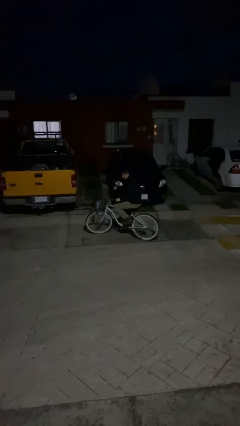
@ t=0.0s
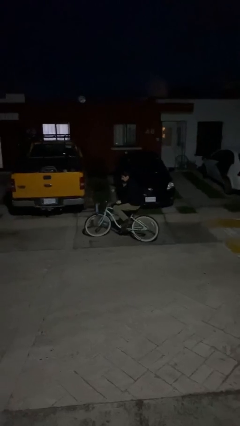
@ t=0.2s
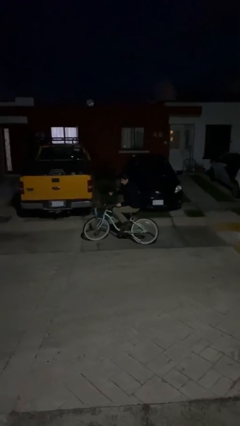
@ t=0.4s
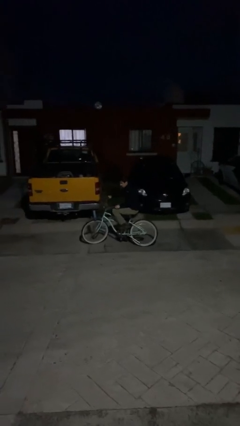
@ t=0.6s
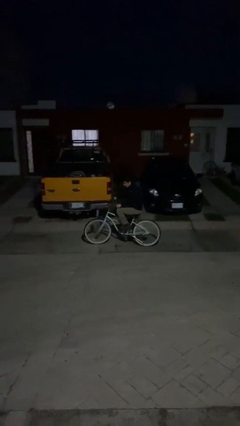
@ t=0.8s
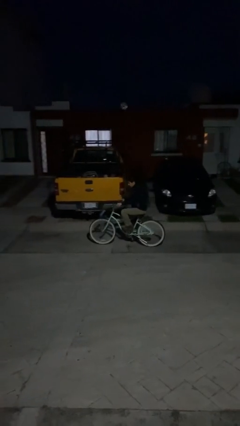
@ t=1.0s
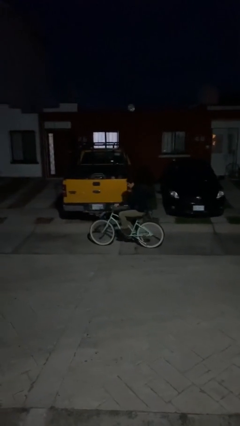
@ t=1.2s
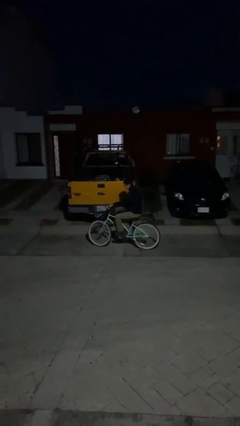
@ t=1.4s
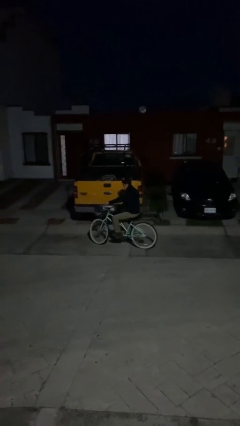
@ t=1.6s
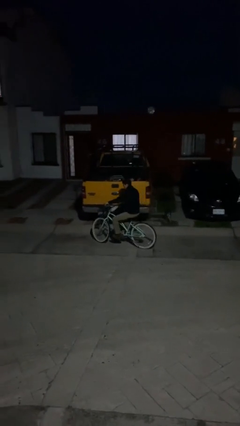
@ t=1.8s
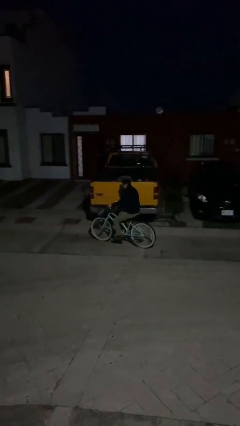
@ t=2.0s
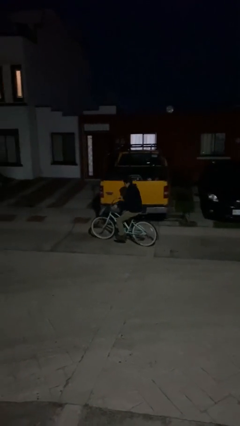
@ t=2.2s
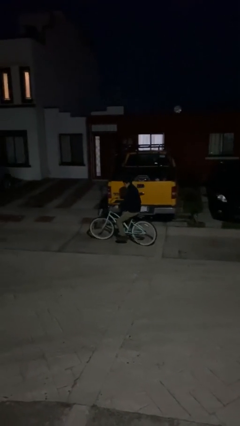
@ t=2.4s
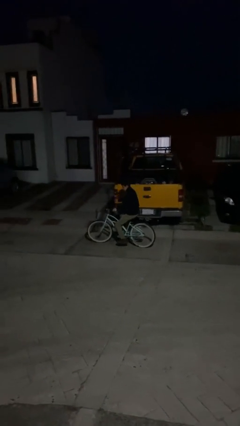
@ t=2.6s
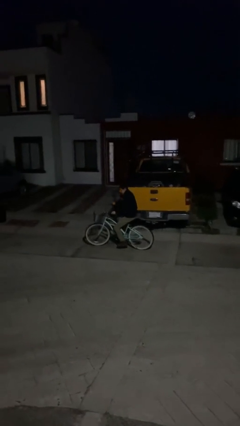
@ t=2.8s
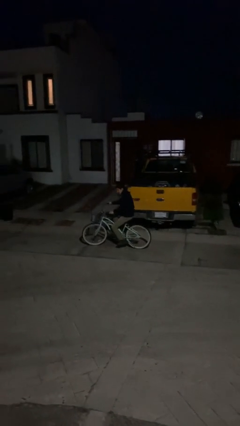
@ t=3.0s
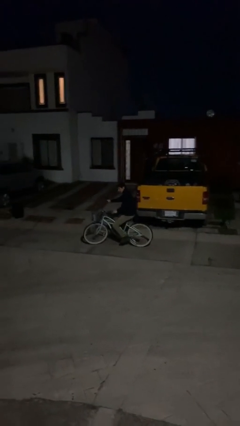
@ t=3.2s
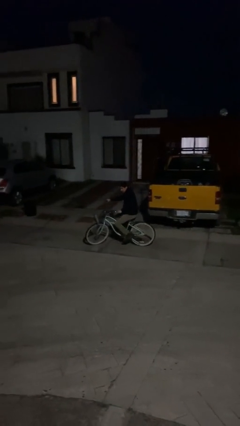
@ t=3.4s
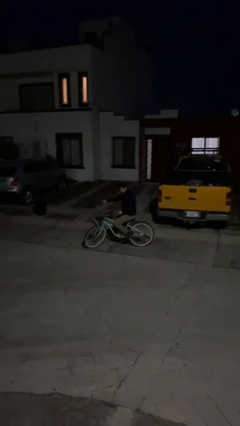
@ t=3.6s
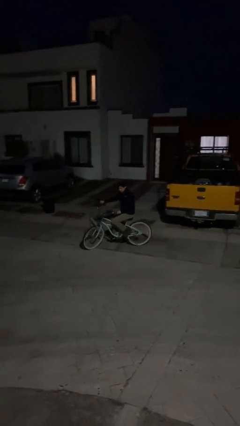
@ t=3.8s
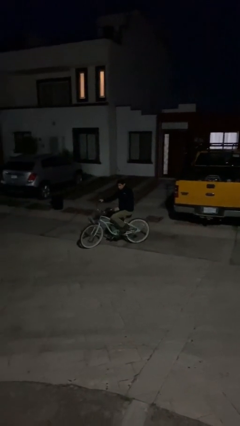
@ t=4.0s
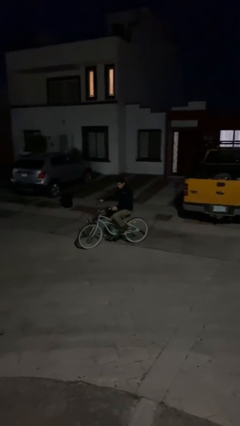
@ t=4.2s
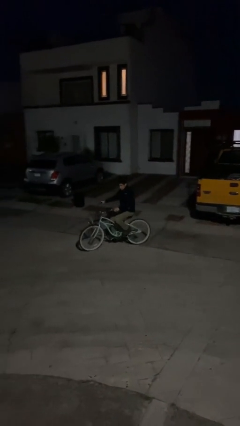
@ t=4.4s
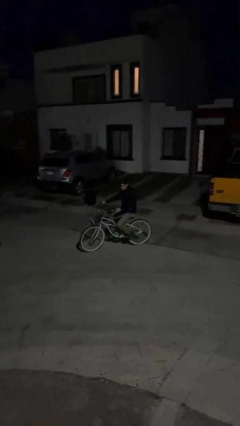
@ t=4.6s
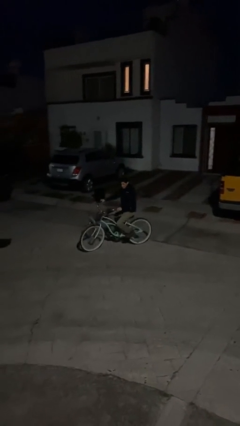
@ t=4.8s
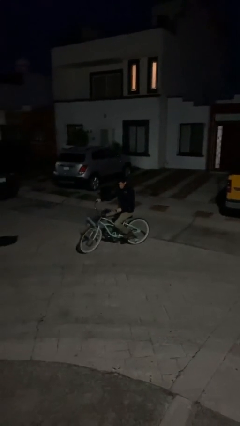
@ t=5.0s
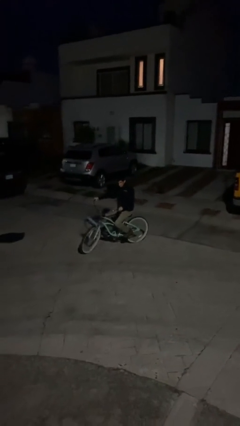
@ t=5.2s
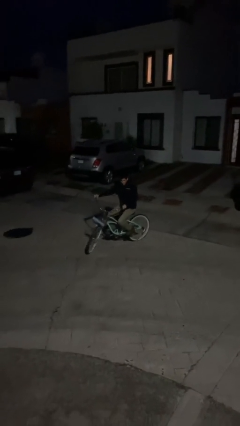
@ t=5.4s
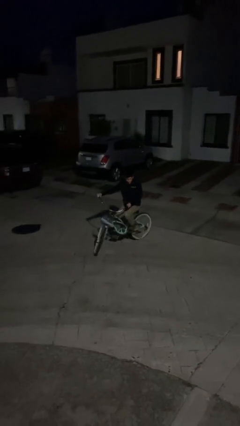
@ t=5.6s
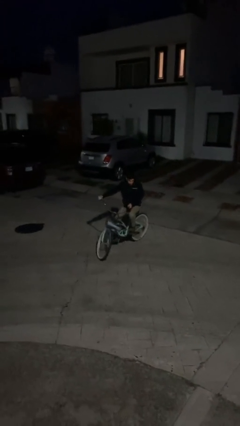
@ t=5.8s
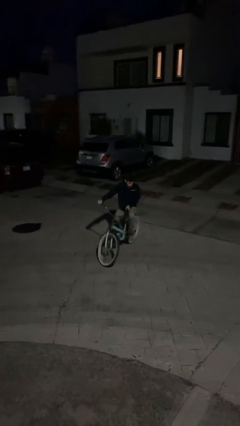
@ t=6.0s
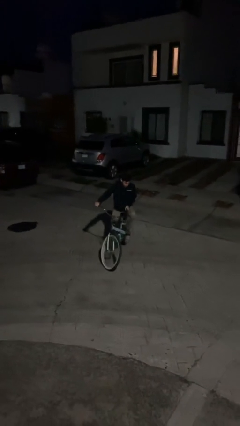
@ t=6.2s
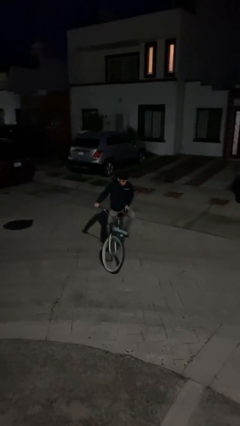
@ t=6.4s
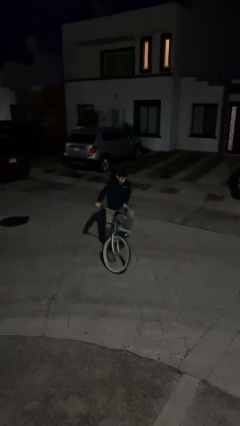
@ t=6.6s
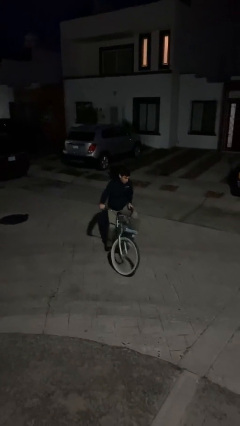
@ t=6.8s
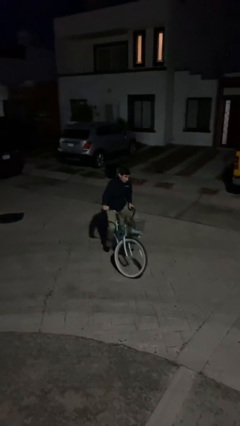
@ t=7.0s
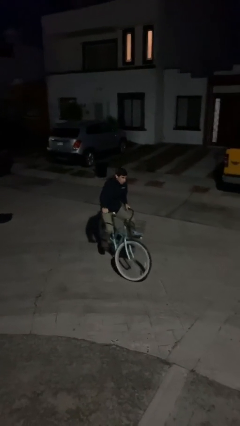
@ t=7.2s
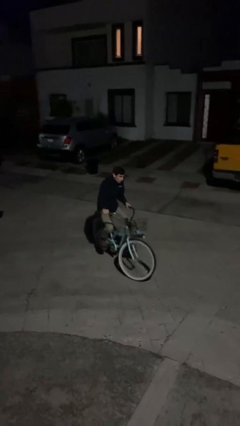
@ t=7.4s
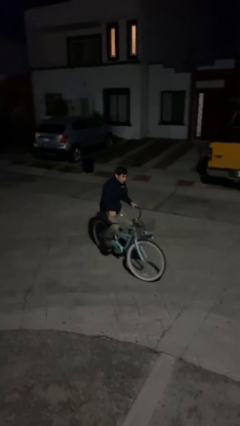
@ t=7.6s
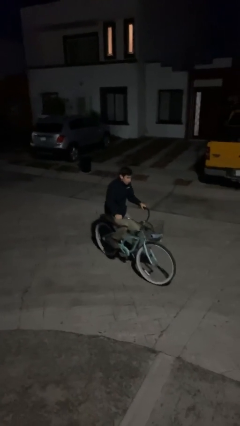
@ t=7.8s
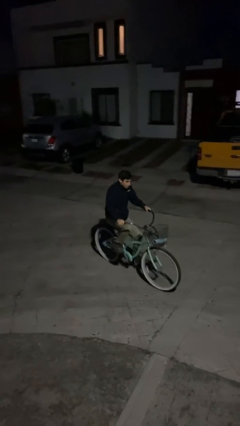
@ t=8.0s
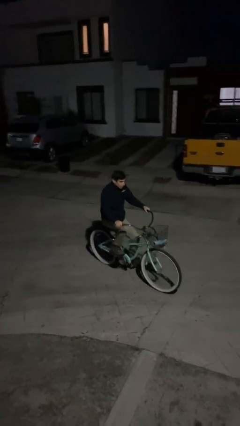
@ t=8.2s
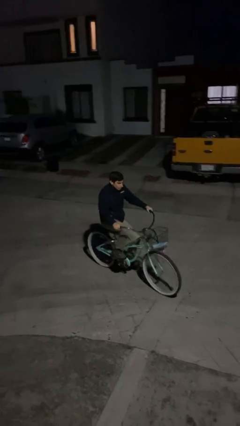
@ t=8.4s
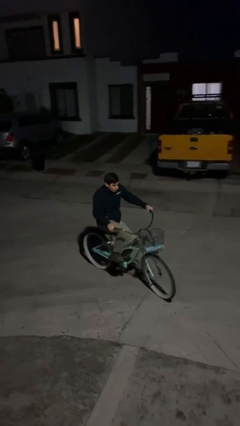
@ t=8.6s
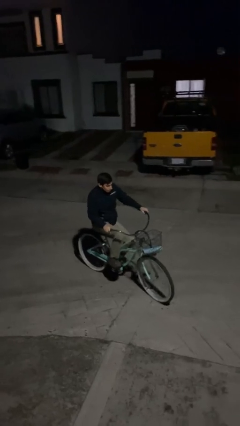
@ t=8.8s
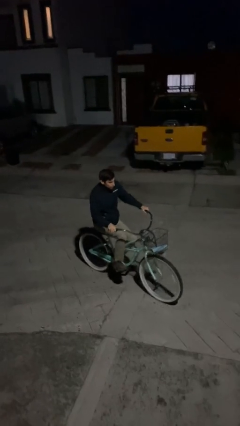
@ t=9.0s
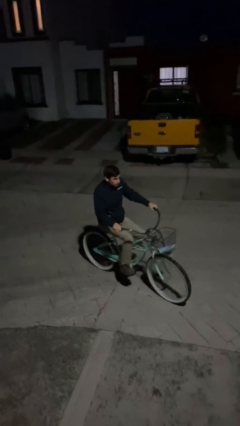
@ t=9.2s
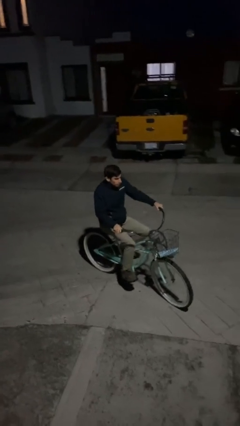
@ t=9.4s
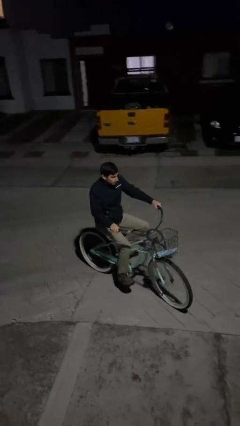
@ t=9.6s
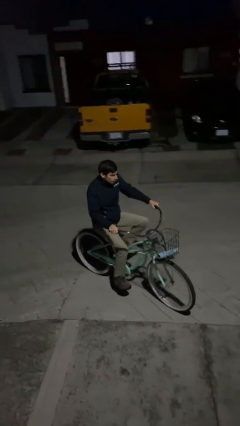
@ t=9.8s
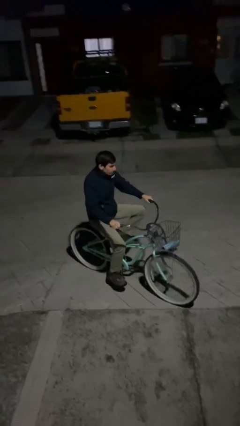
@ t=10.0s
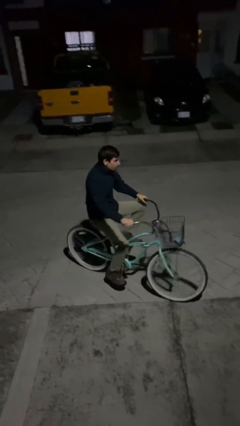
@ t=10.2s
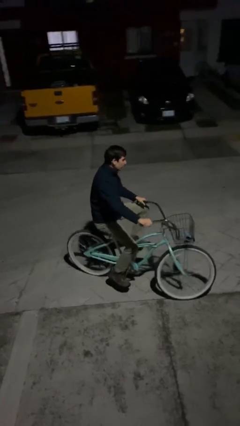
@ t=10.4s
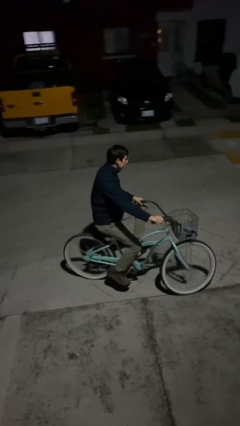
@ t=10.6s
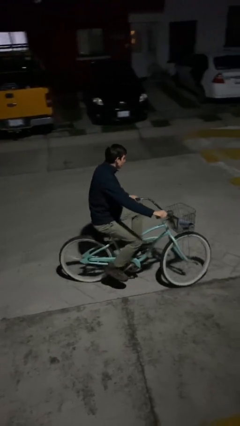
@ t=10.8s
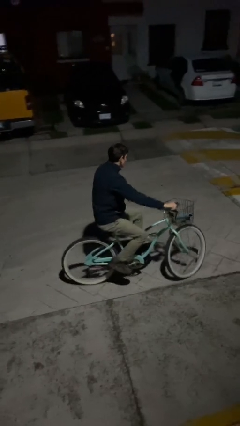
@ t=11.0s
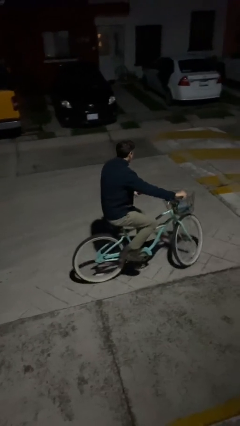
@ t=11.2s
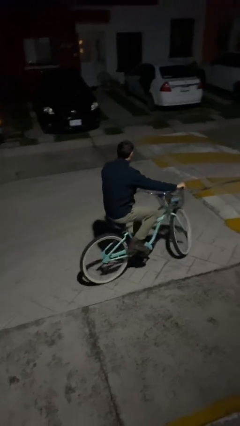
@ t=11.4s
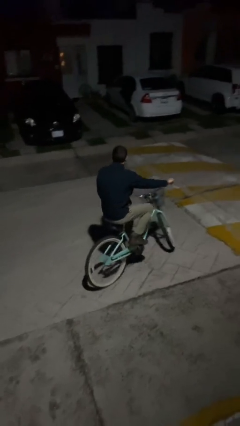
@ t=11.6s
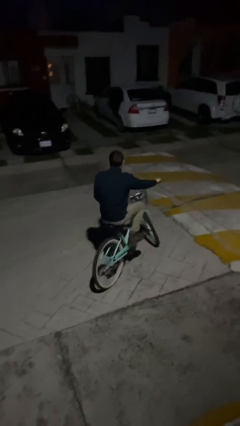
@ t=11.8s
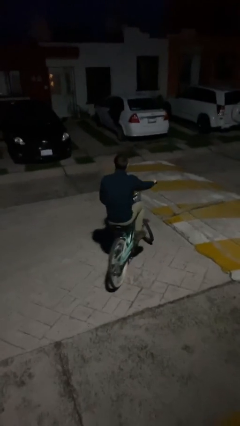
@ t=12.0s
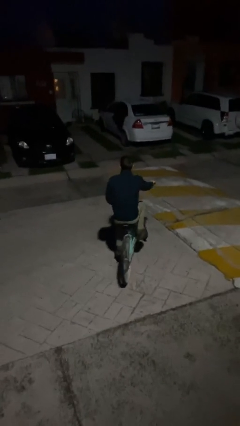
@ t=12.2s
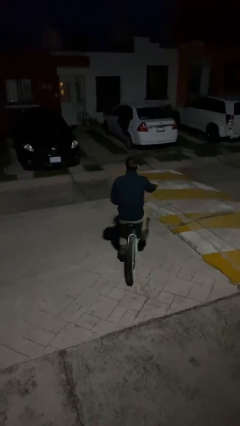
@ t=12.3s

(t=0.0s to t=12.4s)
person rides bicycle

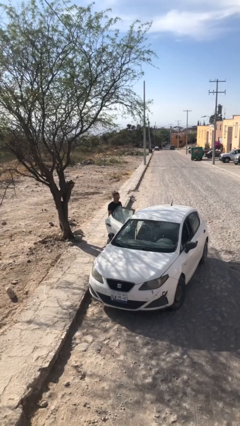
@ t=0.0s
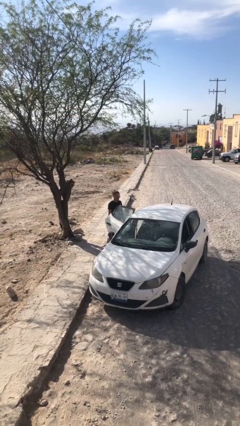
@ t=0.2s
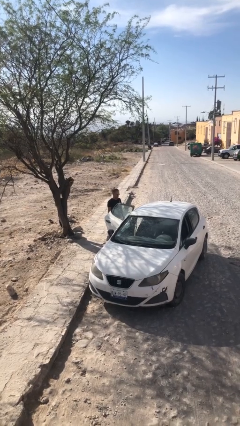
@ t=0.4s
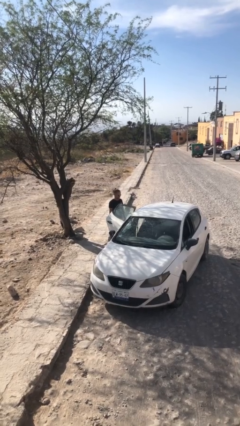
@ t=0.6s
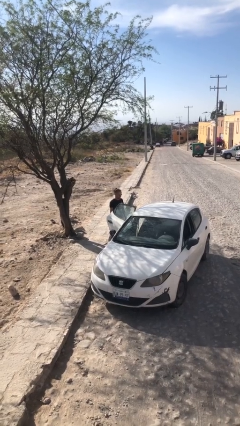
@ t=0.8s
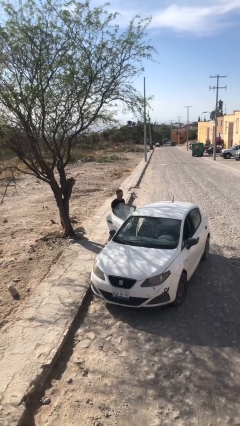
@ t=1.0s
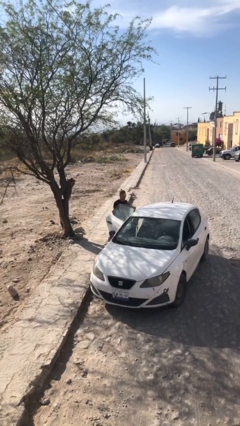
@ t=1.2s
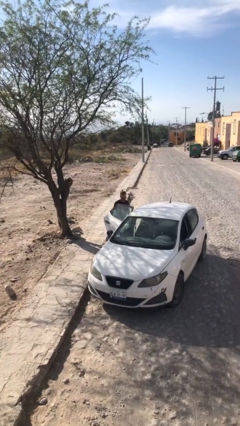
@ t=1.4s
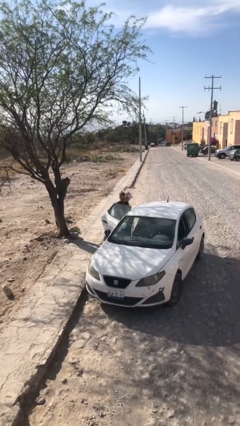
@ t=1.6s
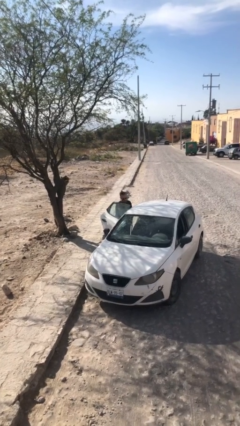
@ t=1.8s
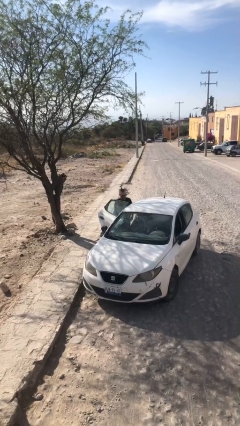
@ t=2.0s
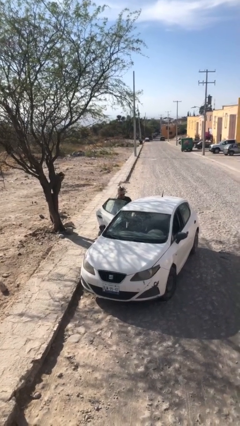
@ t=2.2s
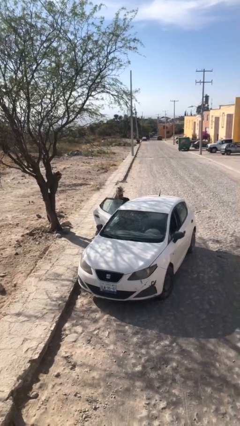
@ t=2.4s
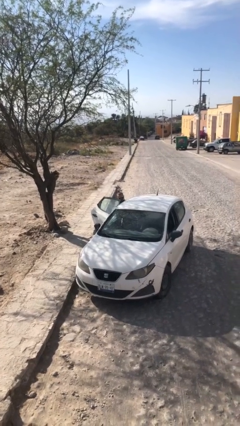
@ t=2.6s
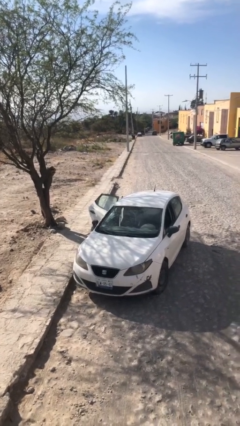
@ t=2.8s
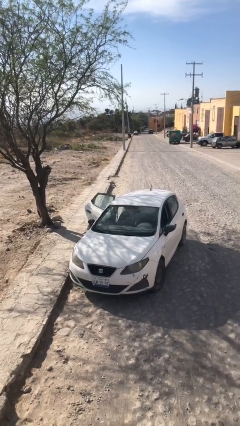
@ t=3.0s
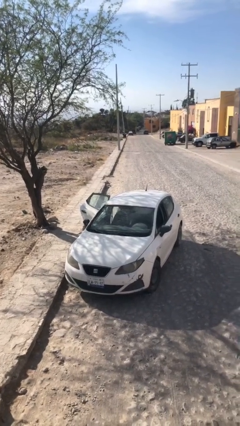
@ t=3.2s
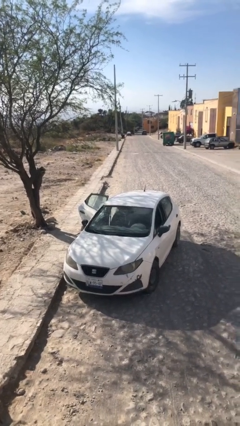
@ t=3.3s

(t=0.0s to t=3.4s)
person enters car

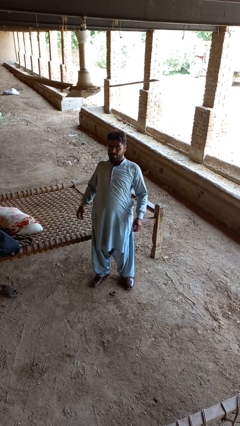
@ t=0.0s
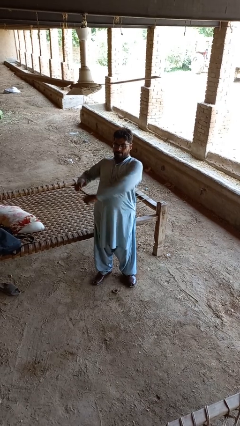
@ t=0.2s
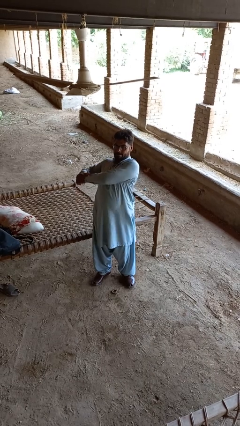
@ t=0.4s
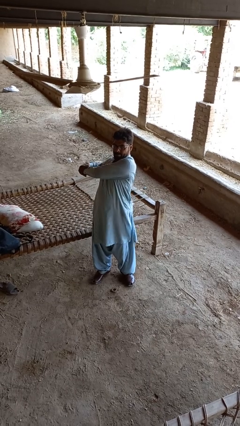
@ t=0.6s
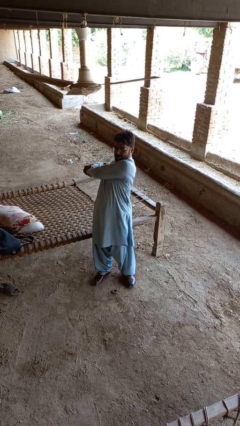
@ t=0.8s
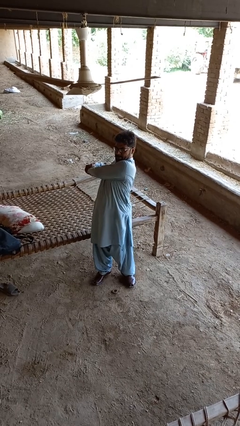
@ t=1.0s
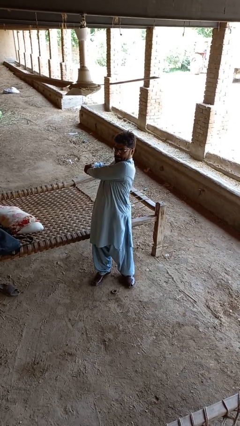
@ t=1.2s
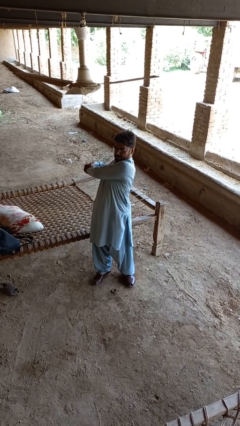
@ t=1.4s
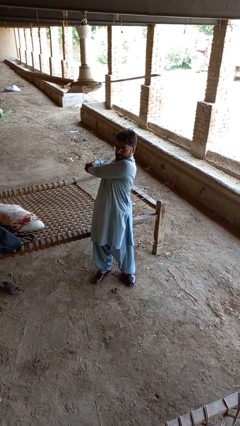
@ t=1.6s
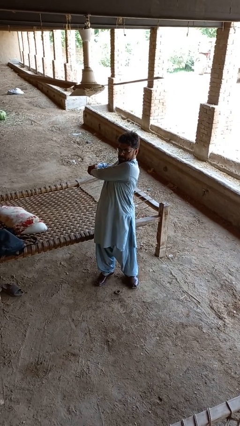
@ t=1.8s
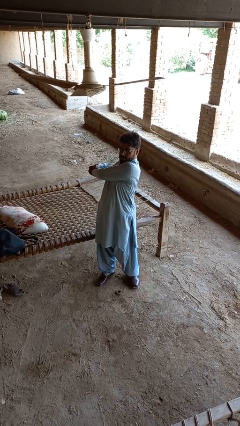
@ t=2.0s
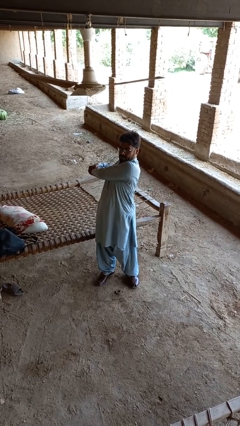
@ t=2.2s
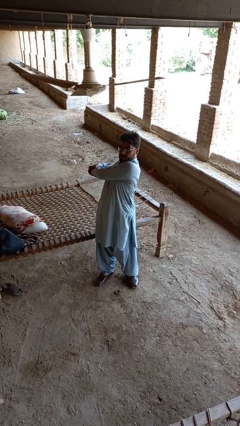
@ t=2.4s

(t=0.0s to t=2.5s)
person stretches arms to side
